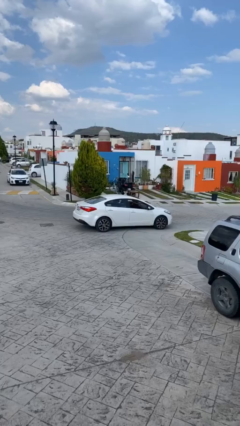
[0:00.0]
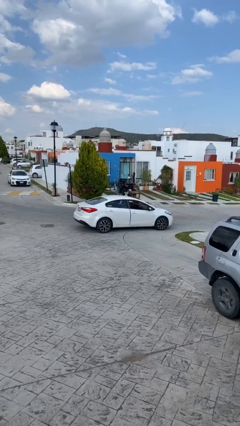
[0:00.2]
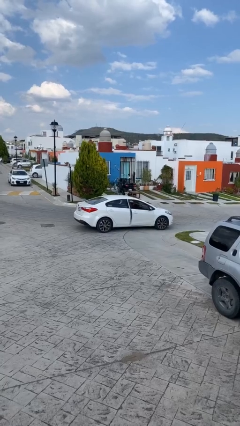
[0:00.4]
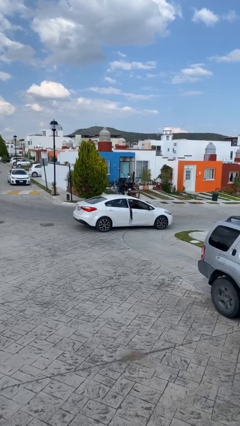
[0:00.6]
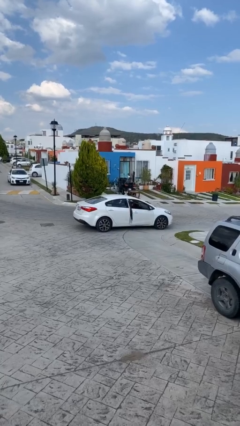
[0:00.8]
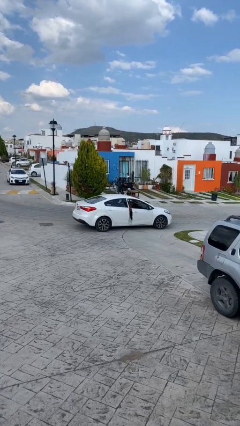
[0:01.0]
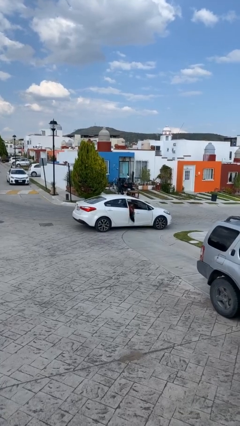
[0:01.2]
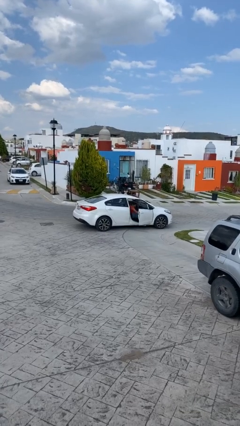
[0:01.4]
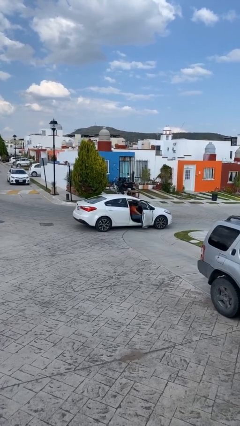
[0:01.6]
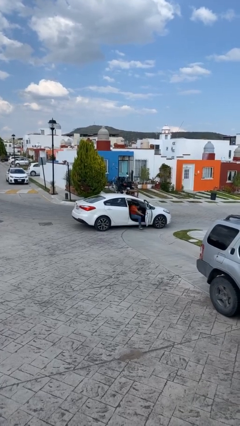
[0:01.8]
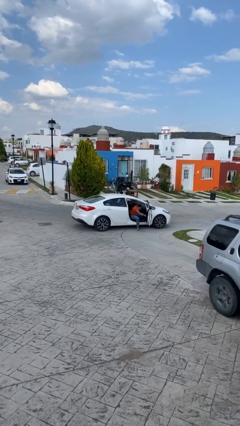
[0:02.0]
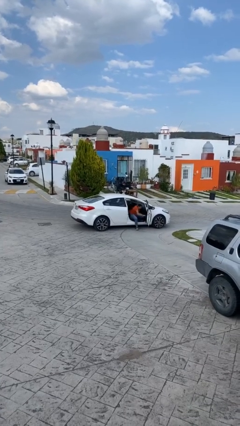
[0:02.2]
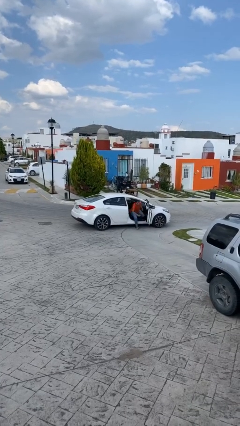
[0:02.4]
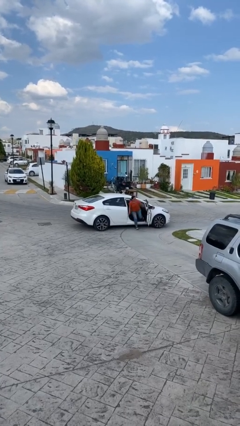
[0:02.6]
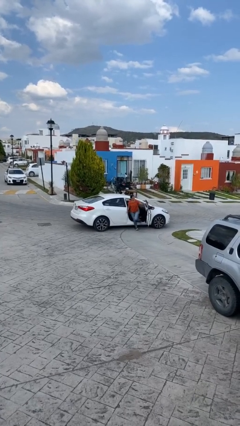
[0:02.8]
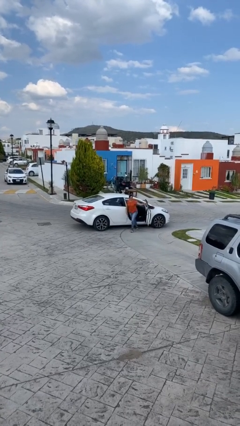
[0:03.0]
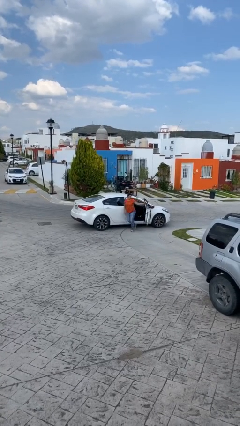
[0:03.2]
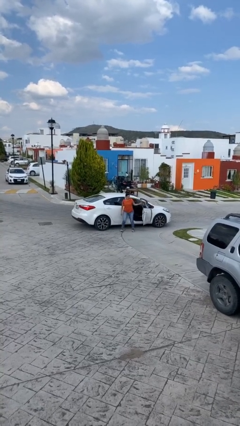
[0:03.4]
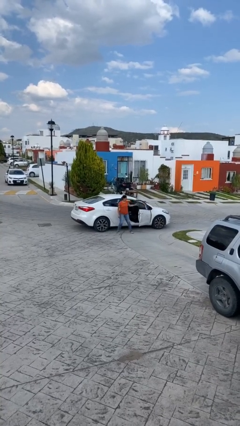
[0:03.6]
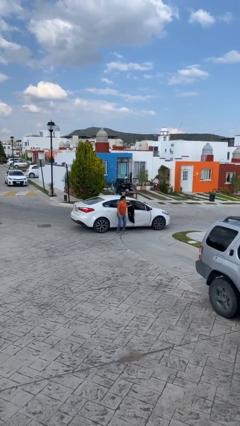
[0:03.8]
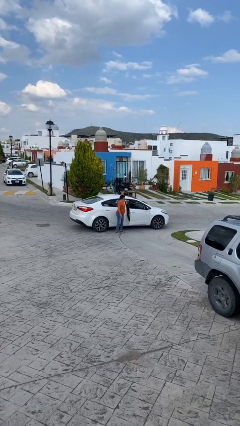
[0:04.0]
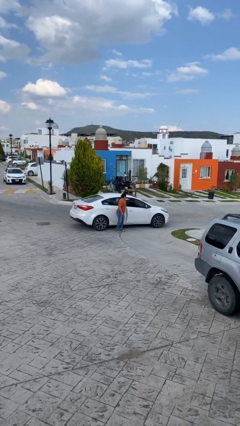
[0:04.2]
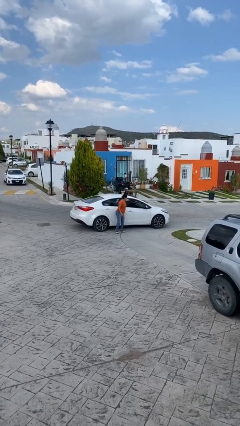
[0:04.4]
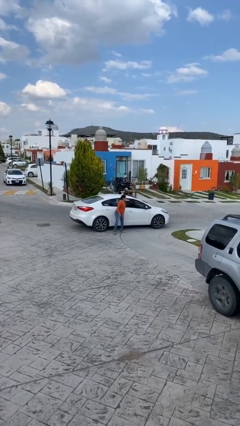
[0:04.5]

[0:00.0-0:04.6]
car drops off person

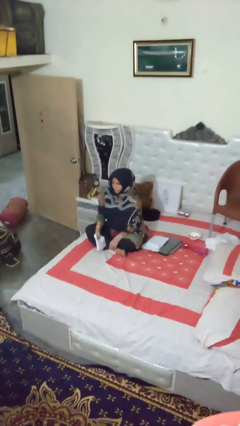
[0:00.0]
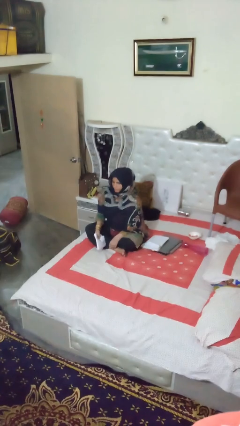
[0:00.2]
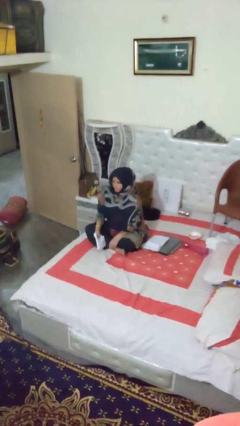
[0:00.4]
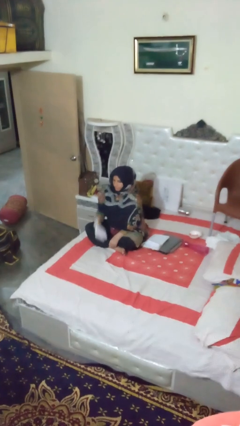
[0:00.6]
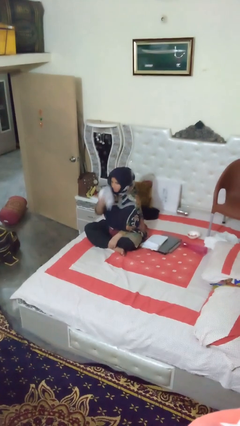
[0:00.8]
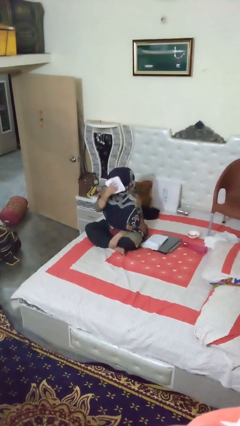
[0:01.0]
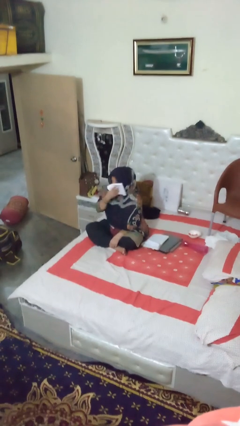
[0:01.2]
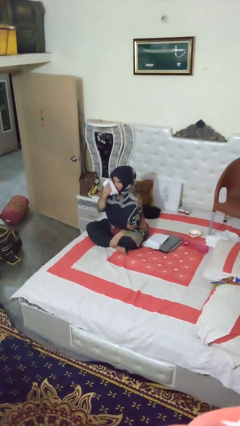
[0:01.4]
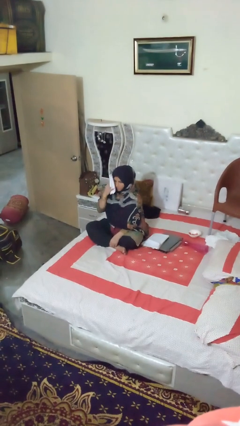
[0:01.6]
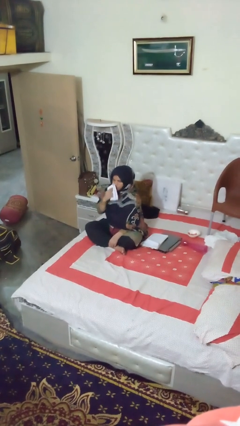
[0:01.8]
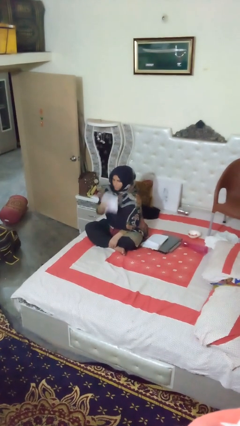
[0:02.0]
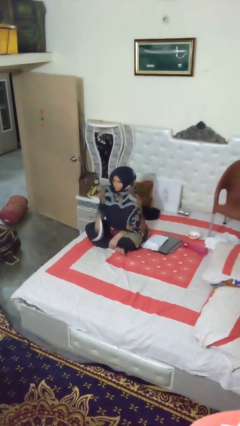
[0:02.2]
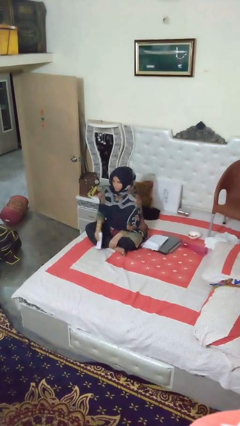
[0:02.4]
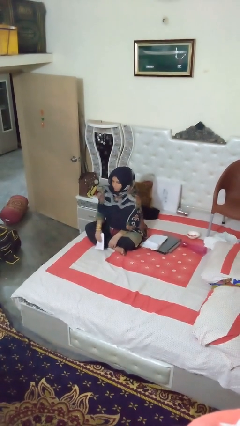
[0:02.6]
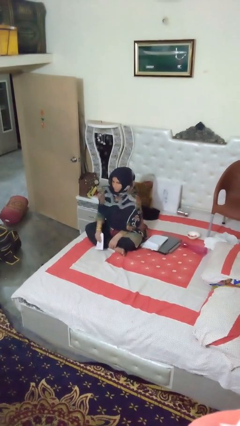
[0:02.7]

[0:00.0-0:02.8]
person wipes mouth with napkin

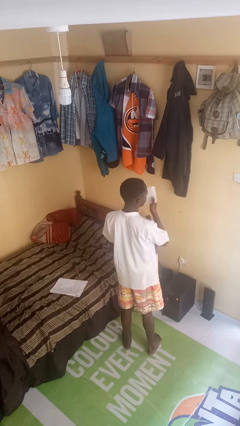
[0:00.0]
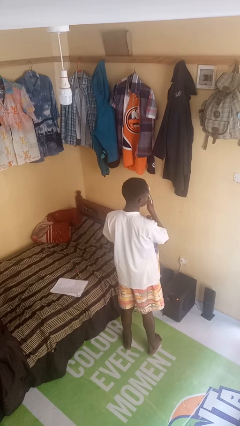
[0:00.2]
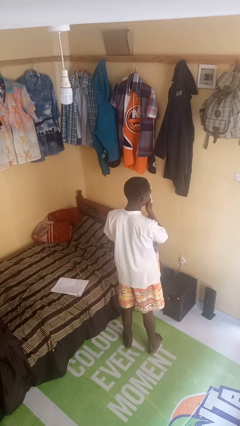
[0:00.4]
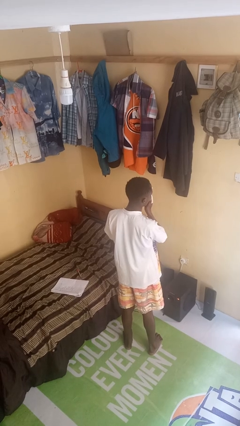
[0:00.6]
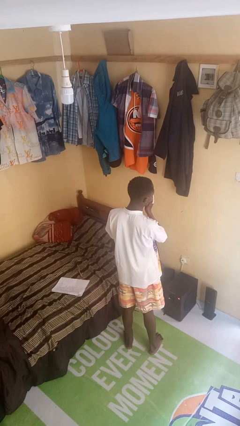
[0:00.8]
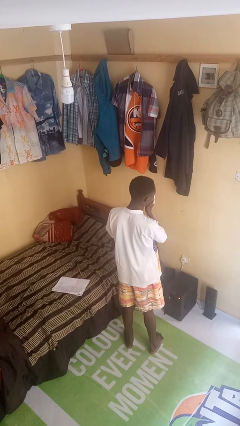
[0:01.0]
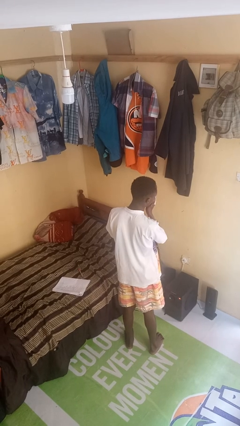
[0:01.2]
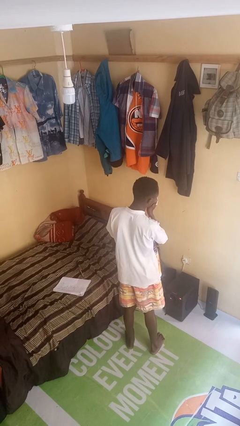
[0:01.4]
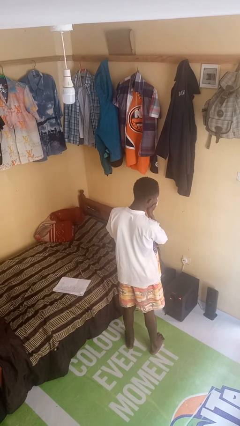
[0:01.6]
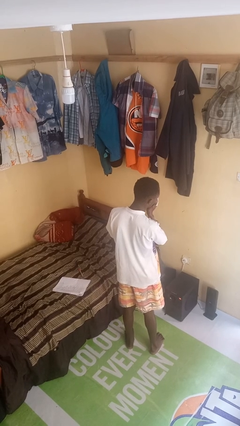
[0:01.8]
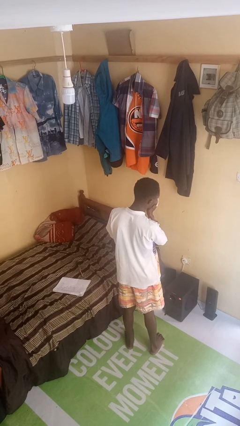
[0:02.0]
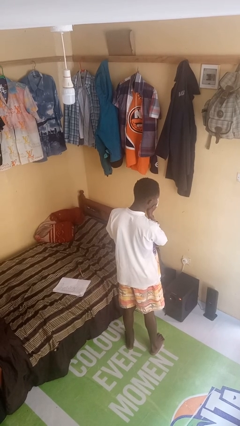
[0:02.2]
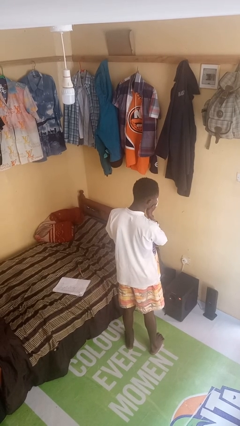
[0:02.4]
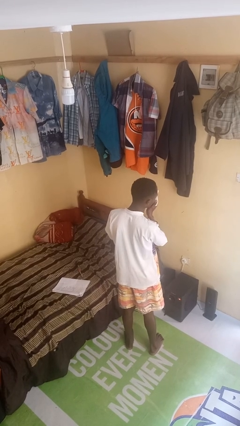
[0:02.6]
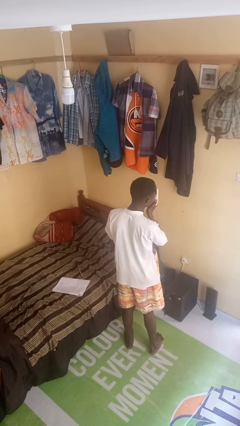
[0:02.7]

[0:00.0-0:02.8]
person blows nose

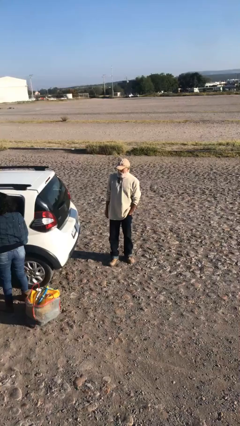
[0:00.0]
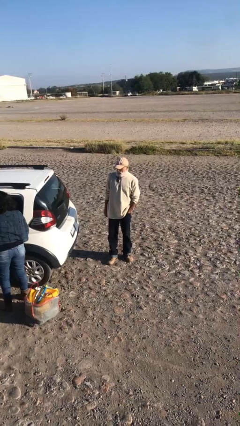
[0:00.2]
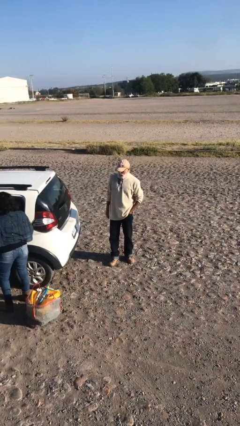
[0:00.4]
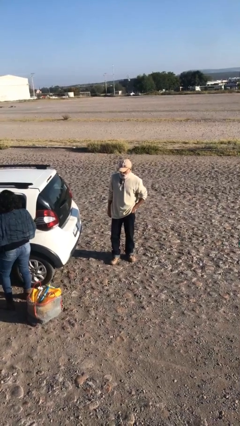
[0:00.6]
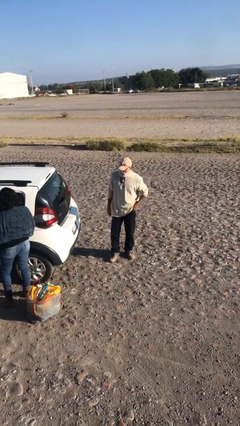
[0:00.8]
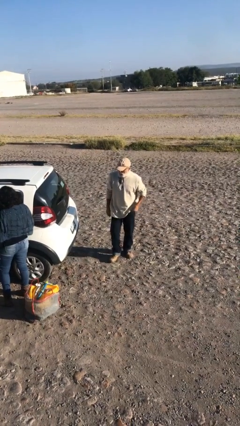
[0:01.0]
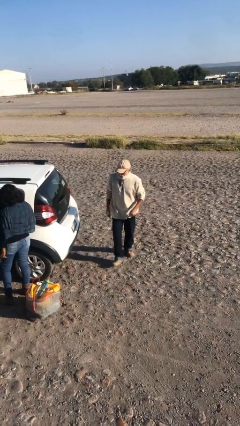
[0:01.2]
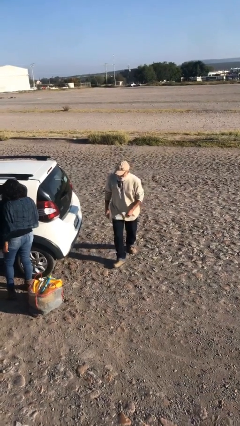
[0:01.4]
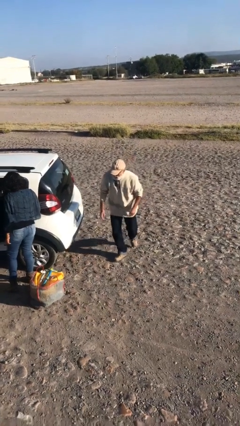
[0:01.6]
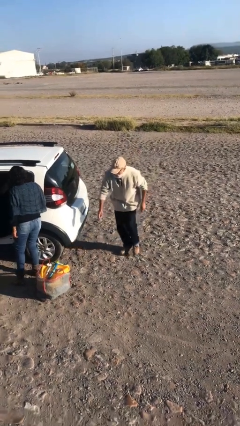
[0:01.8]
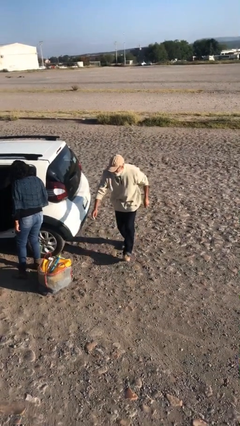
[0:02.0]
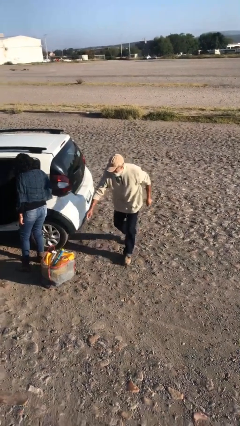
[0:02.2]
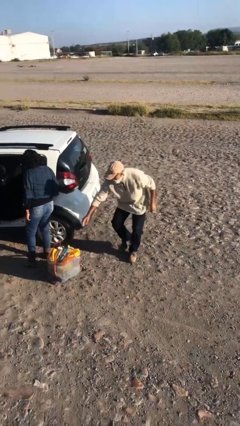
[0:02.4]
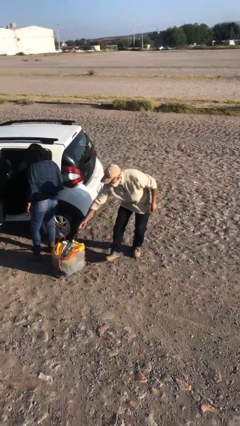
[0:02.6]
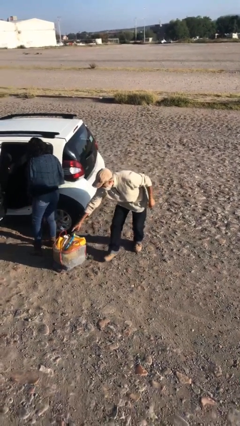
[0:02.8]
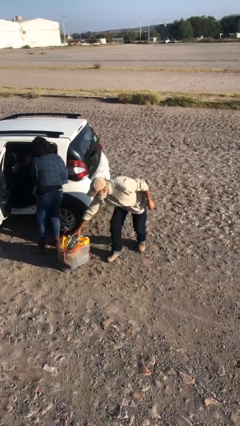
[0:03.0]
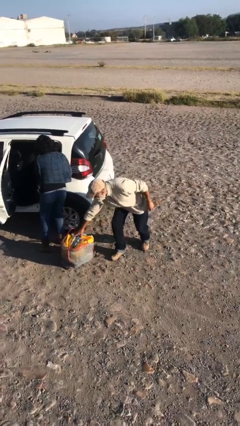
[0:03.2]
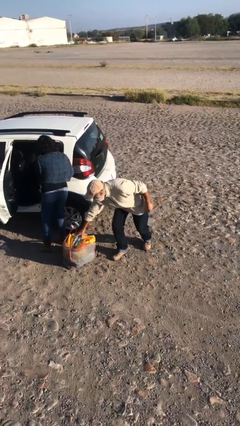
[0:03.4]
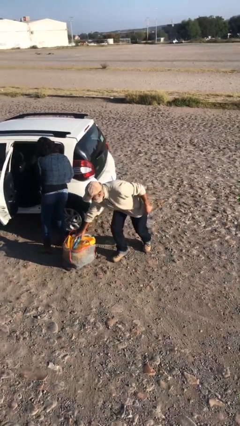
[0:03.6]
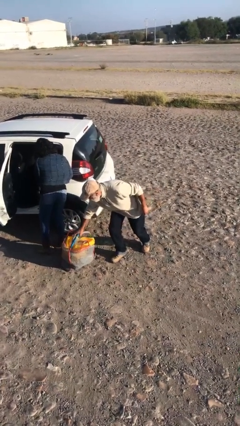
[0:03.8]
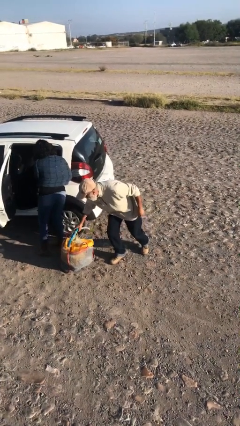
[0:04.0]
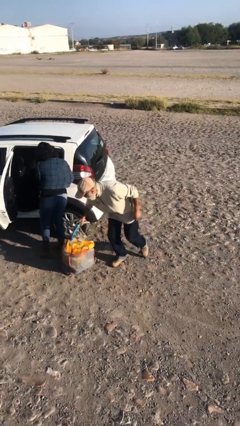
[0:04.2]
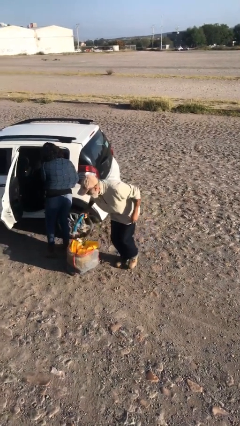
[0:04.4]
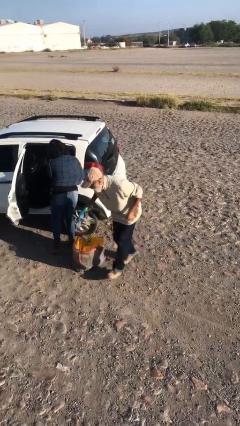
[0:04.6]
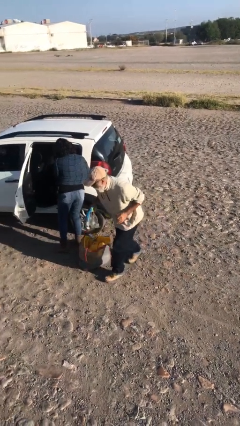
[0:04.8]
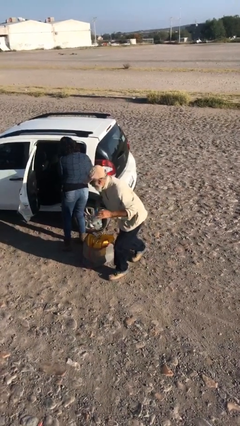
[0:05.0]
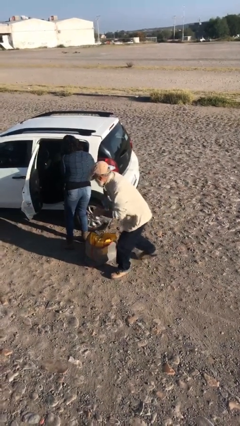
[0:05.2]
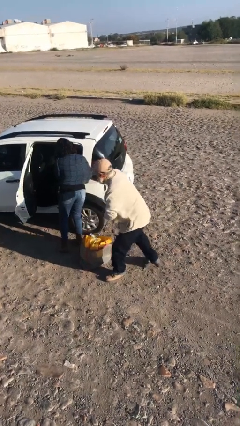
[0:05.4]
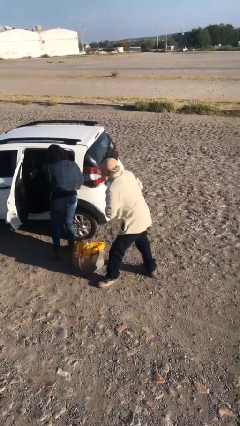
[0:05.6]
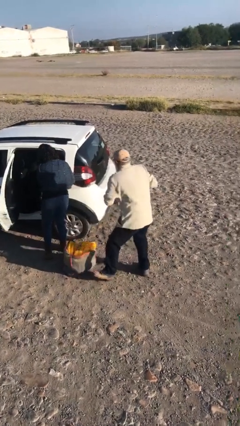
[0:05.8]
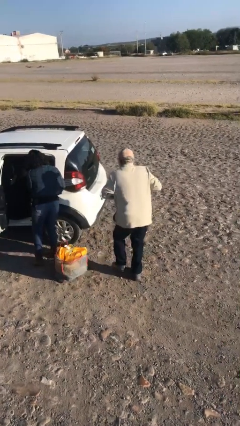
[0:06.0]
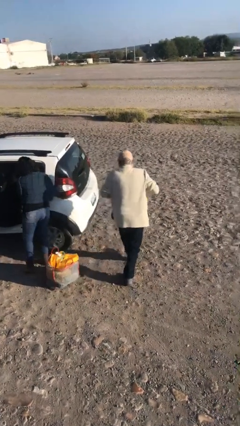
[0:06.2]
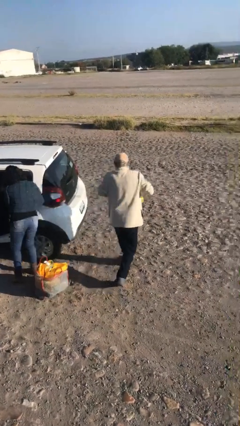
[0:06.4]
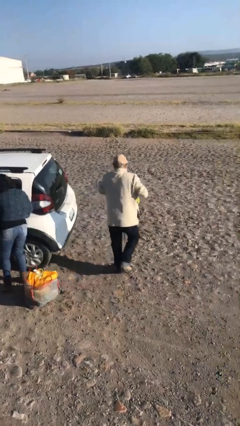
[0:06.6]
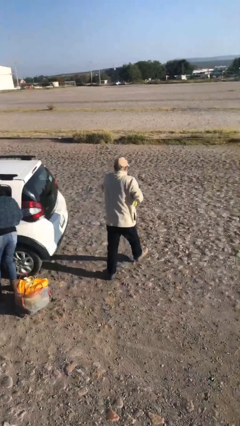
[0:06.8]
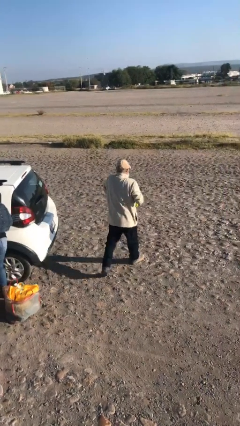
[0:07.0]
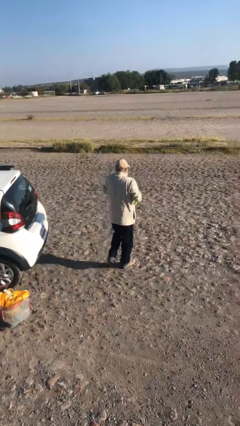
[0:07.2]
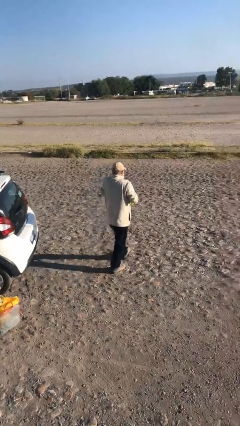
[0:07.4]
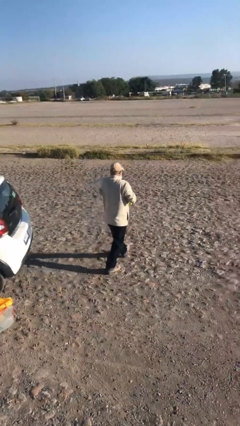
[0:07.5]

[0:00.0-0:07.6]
person steals object from person
